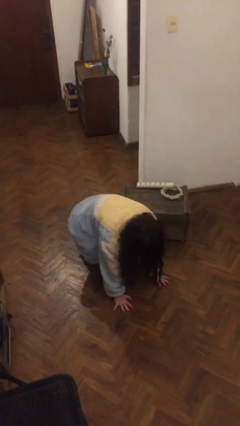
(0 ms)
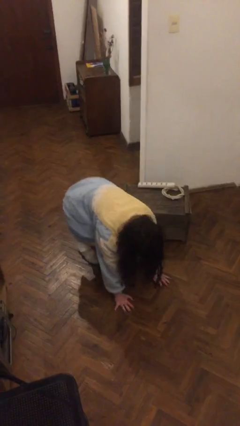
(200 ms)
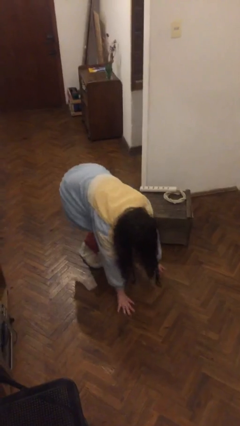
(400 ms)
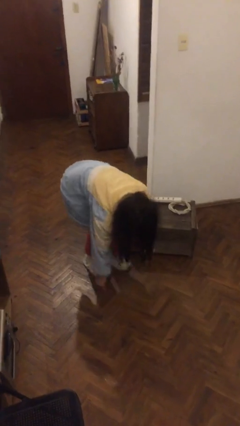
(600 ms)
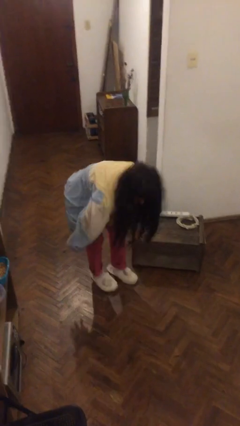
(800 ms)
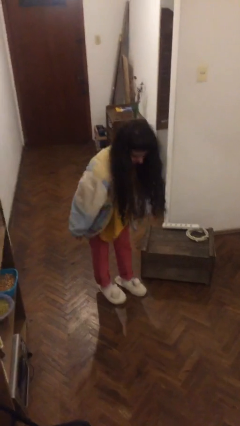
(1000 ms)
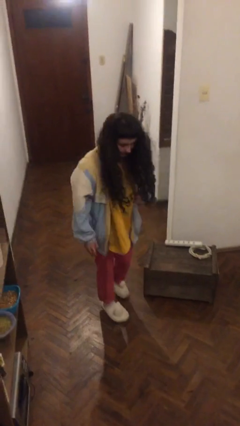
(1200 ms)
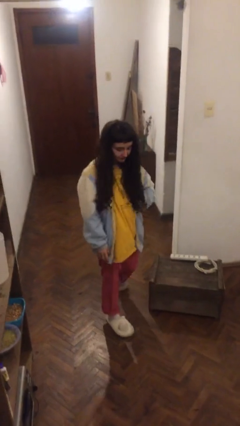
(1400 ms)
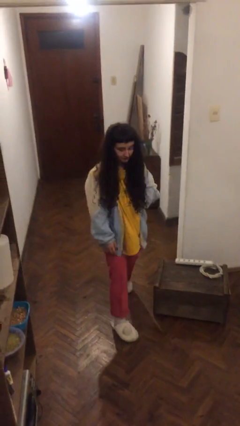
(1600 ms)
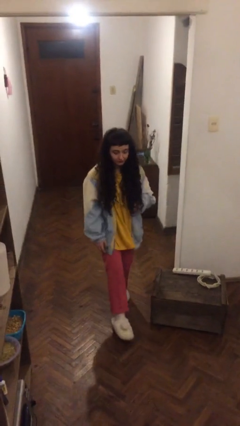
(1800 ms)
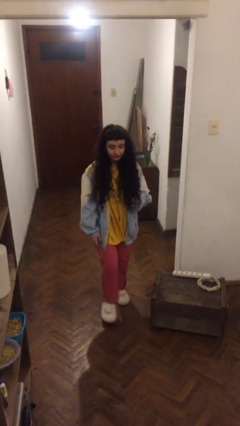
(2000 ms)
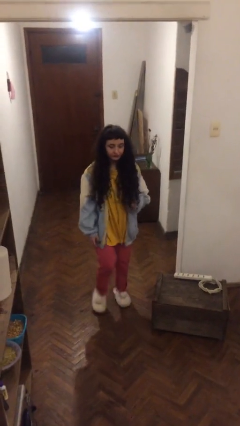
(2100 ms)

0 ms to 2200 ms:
person stands up from floor

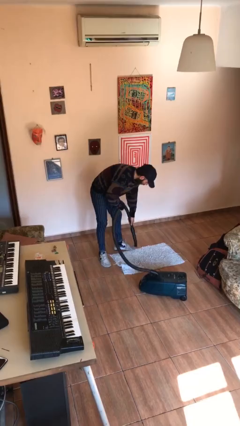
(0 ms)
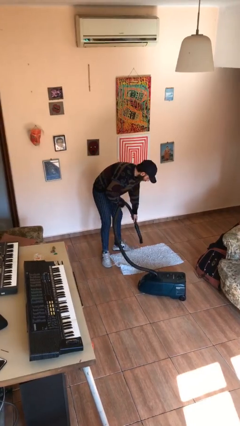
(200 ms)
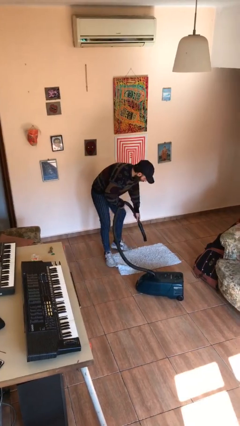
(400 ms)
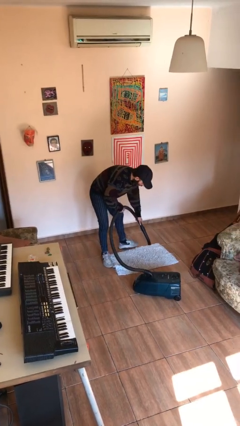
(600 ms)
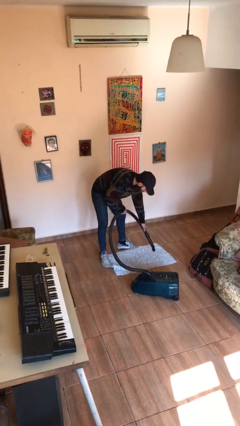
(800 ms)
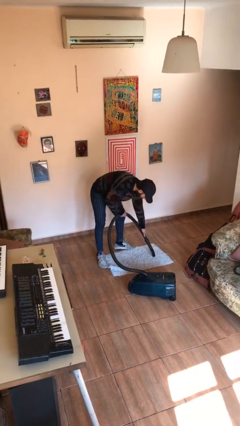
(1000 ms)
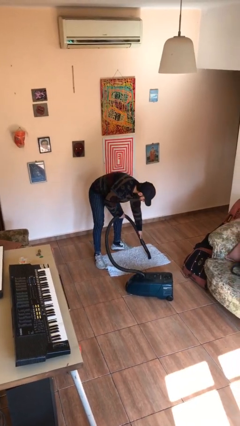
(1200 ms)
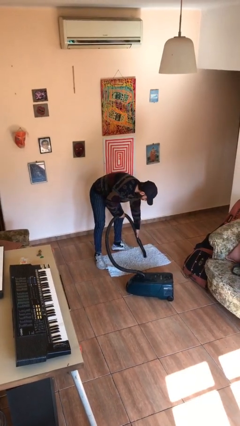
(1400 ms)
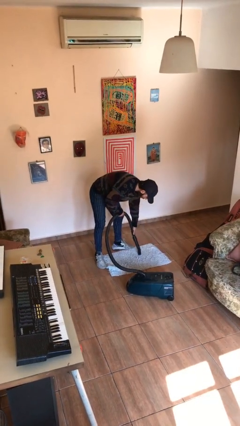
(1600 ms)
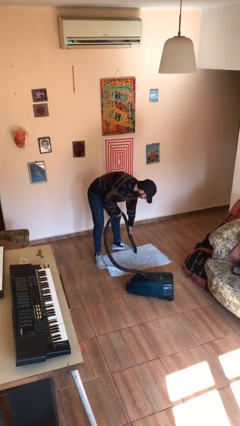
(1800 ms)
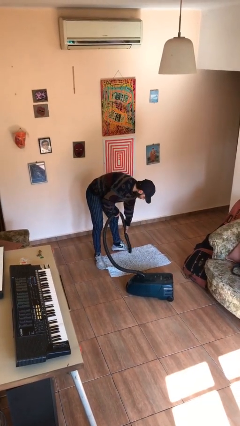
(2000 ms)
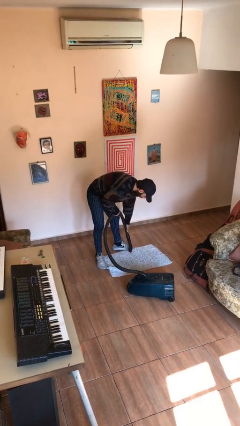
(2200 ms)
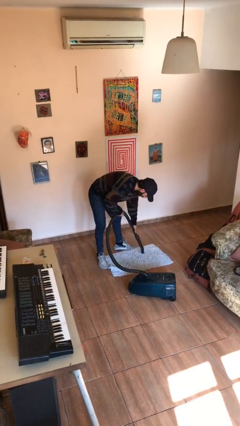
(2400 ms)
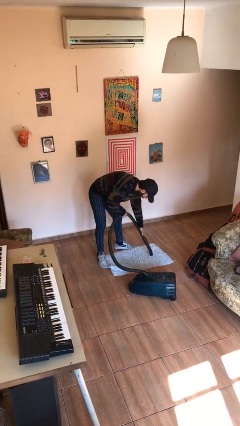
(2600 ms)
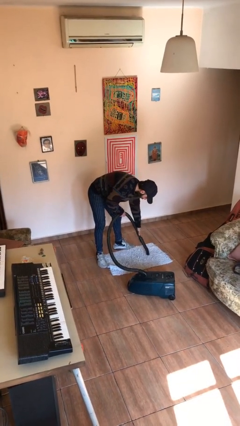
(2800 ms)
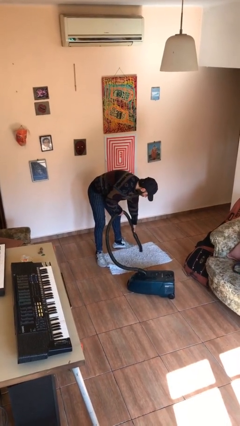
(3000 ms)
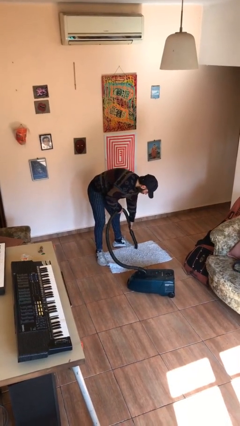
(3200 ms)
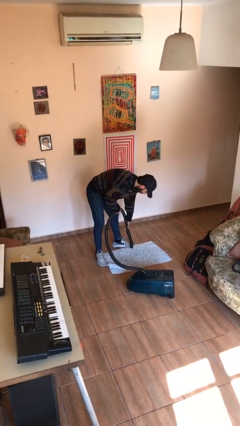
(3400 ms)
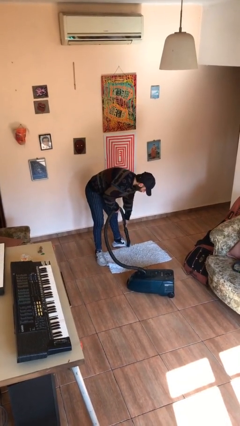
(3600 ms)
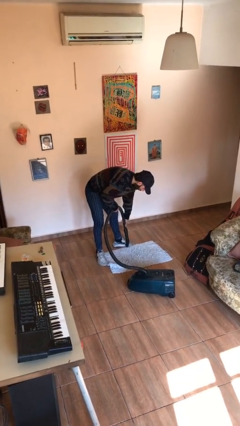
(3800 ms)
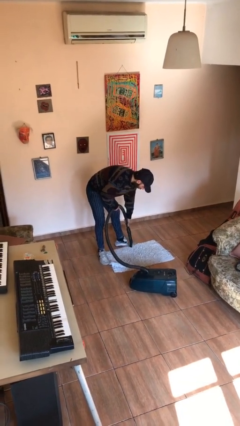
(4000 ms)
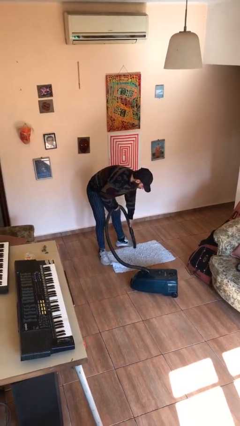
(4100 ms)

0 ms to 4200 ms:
person vacuums carpet

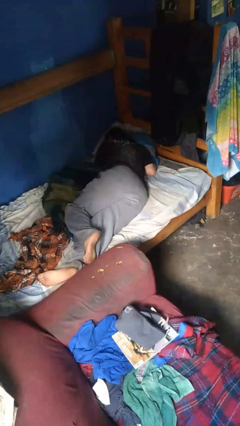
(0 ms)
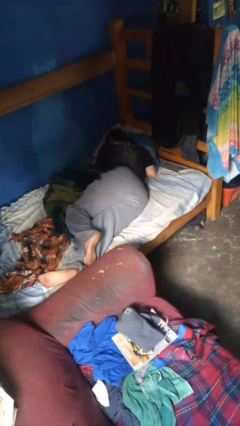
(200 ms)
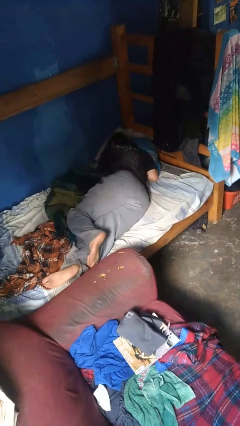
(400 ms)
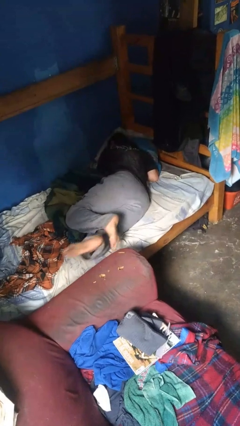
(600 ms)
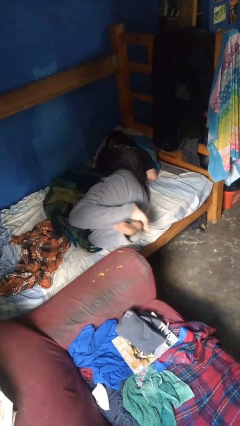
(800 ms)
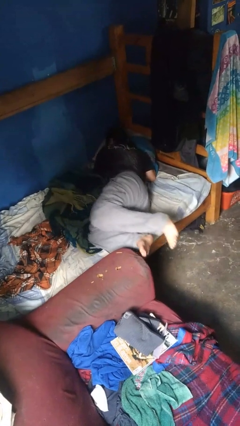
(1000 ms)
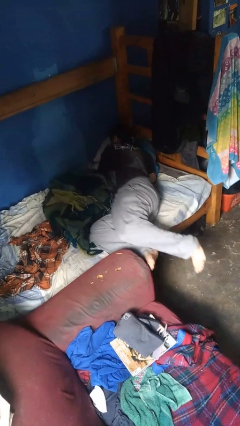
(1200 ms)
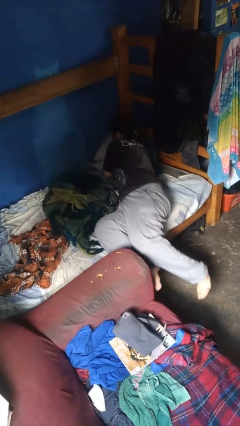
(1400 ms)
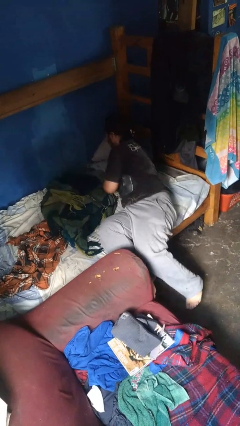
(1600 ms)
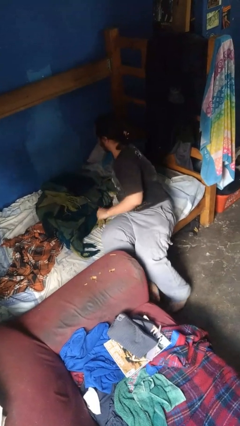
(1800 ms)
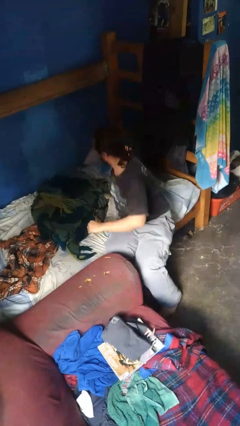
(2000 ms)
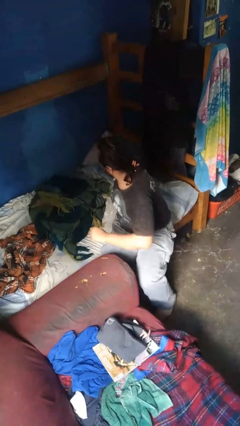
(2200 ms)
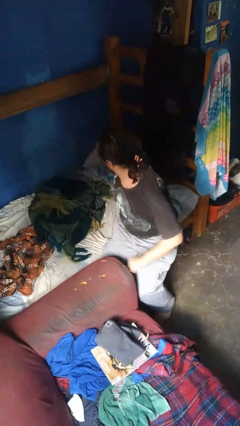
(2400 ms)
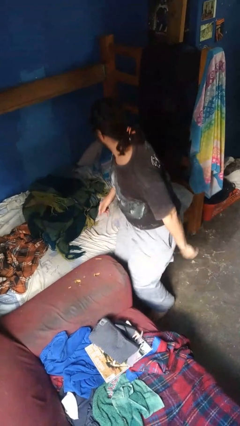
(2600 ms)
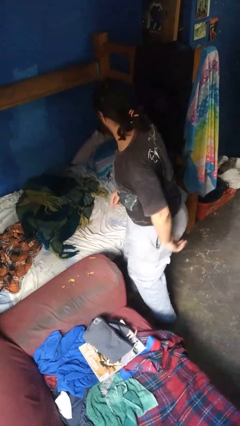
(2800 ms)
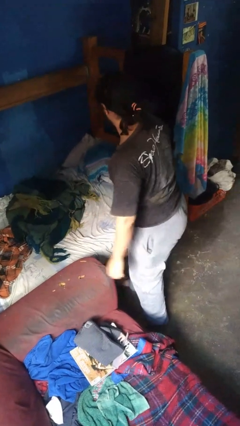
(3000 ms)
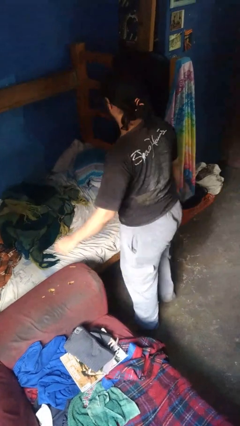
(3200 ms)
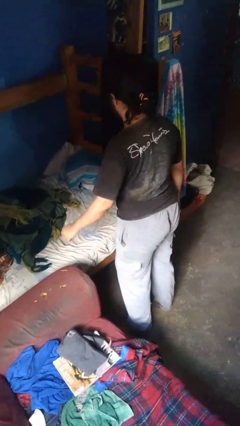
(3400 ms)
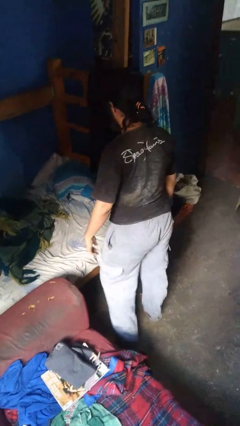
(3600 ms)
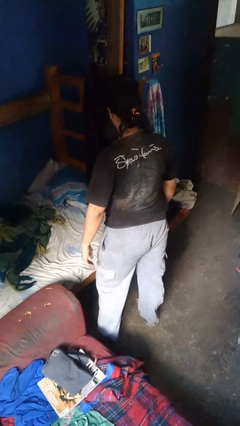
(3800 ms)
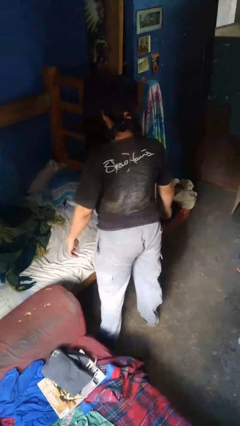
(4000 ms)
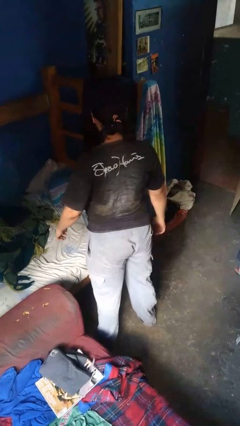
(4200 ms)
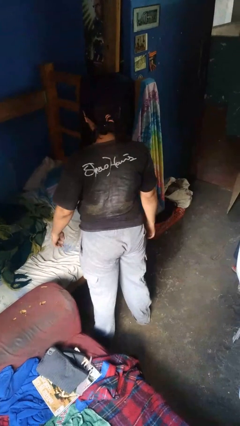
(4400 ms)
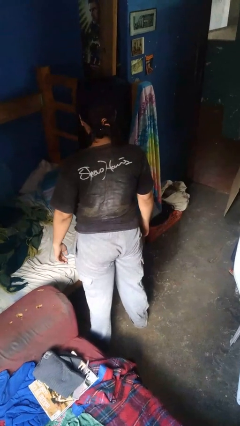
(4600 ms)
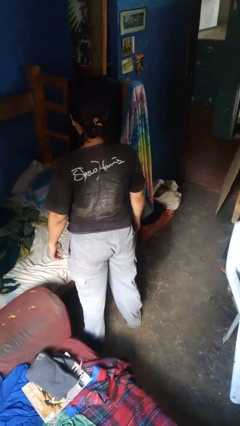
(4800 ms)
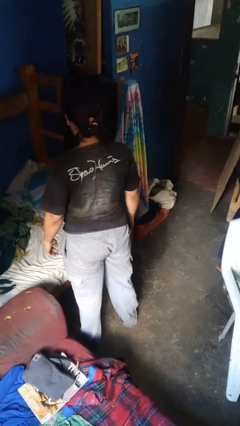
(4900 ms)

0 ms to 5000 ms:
person stands up

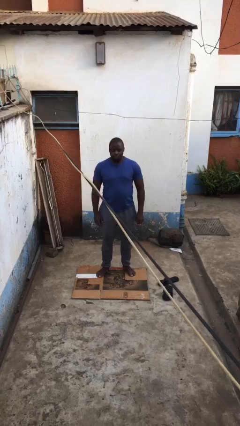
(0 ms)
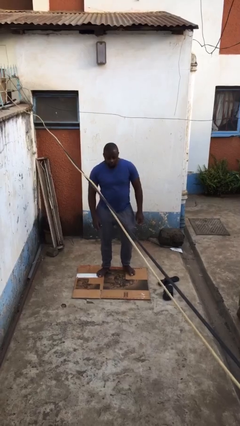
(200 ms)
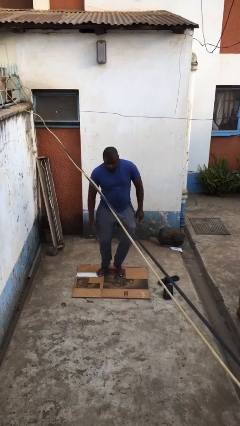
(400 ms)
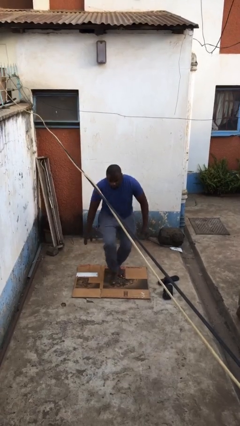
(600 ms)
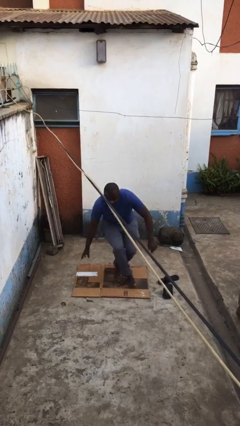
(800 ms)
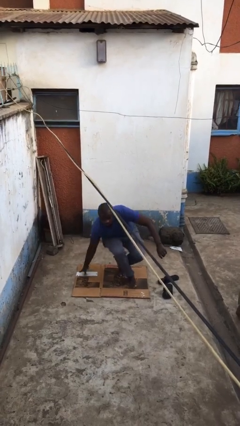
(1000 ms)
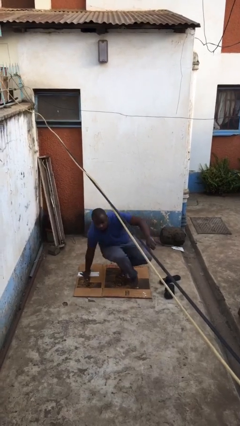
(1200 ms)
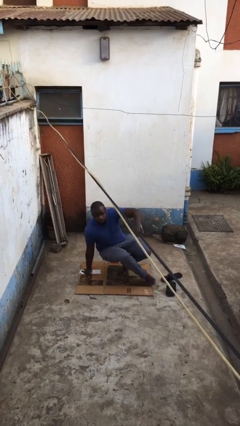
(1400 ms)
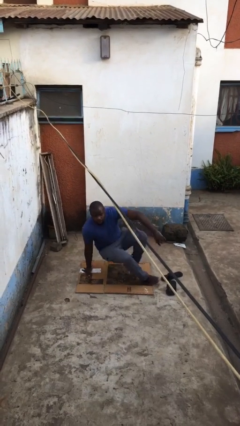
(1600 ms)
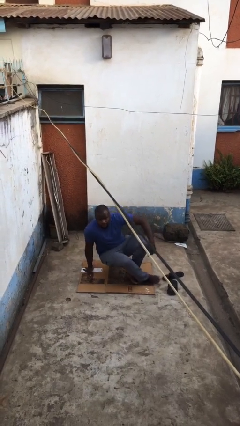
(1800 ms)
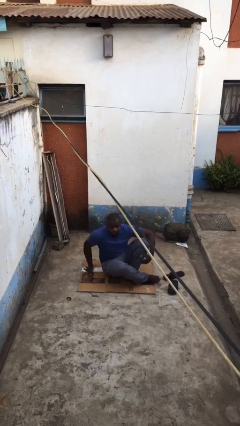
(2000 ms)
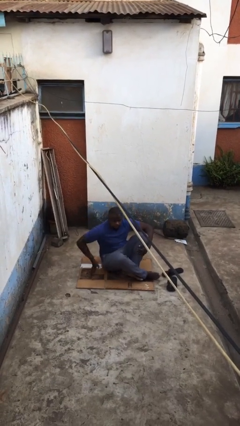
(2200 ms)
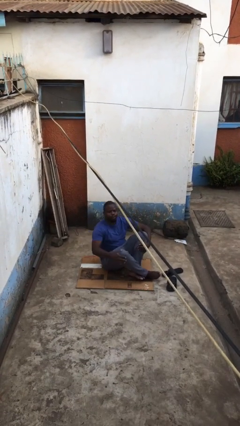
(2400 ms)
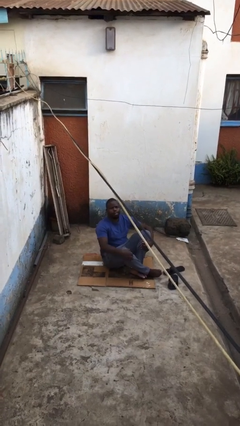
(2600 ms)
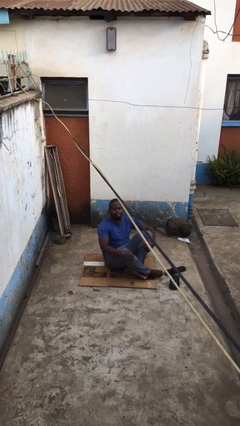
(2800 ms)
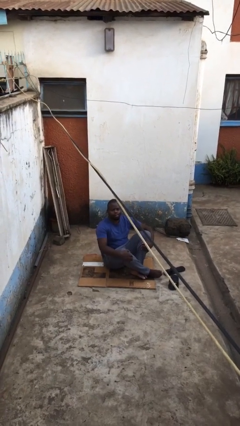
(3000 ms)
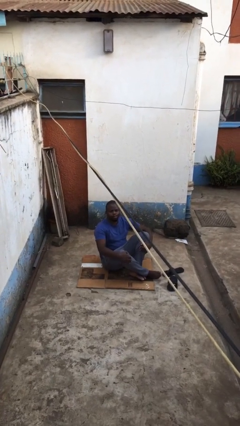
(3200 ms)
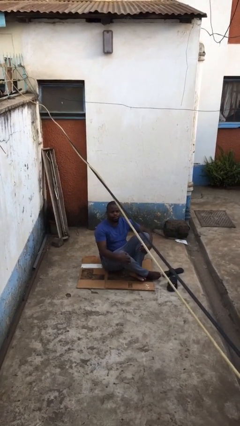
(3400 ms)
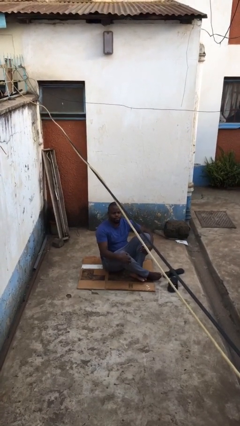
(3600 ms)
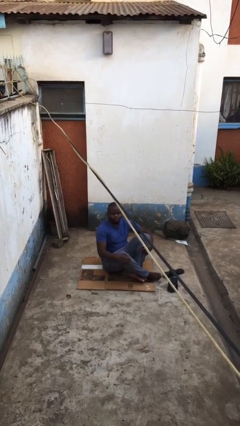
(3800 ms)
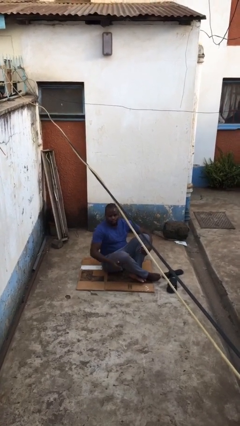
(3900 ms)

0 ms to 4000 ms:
person sits crisscross

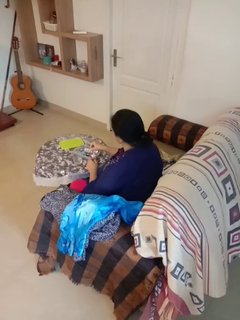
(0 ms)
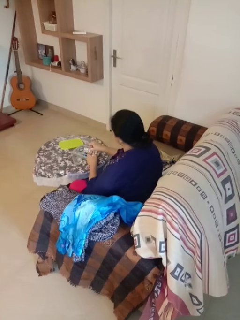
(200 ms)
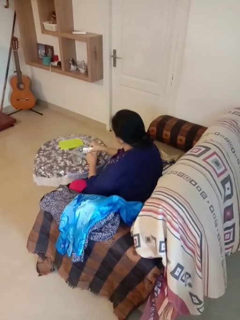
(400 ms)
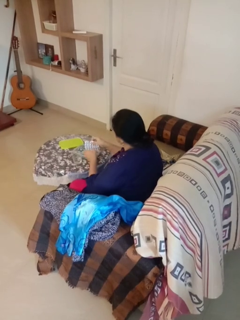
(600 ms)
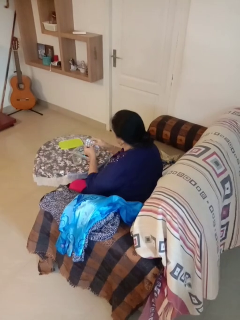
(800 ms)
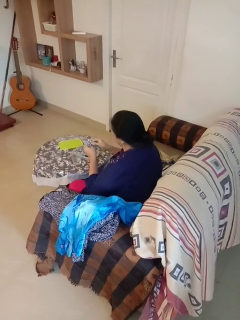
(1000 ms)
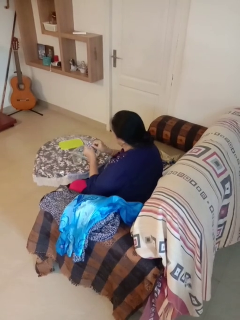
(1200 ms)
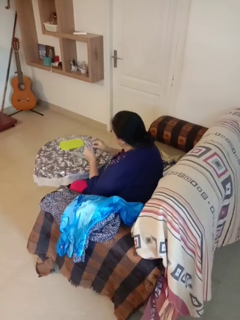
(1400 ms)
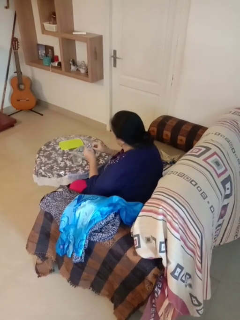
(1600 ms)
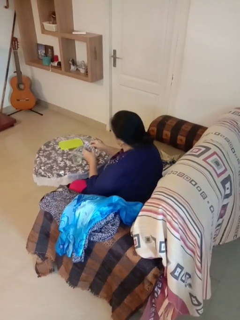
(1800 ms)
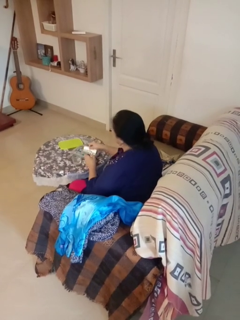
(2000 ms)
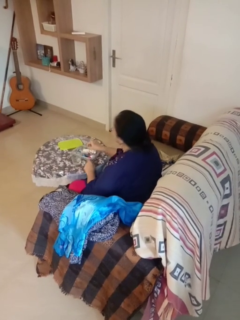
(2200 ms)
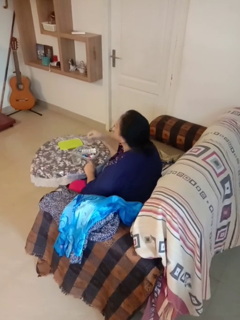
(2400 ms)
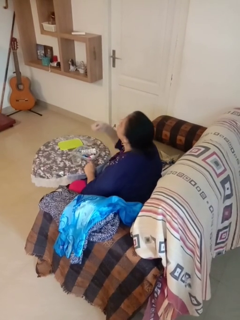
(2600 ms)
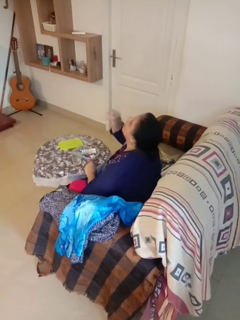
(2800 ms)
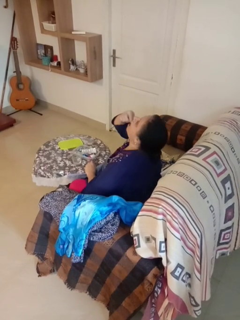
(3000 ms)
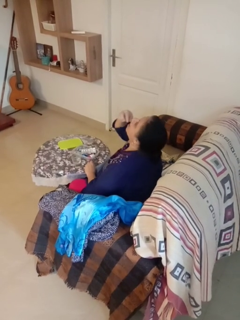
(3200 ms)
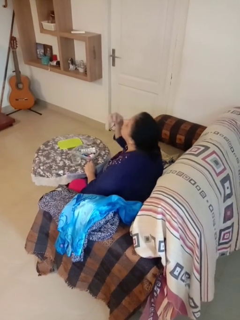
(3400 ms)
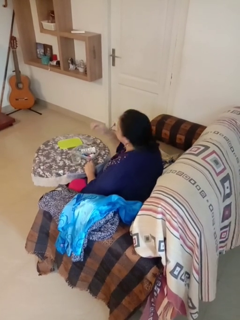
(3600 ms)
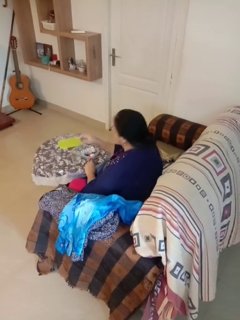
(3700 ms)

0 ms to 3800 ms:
person takes medicine pills
